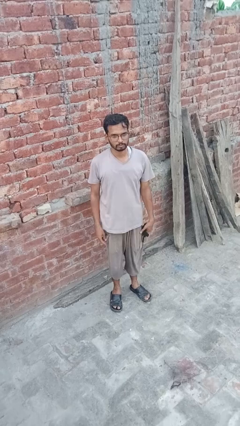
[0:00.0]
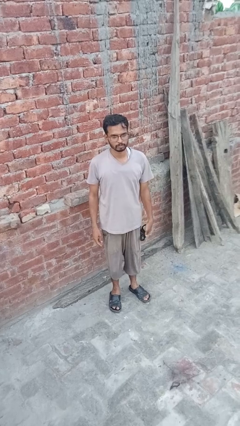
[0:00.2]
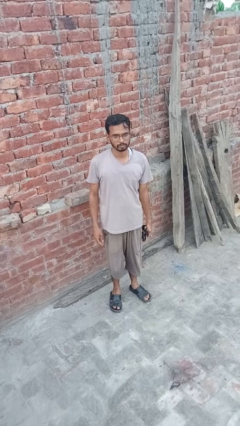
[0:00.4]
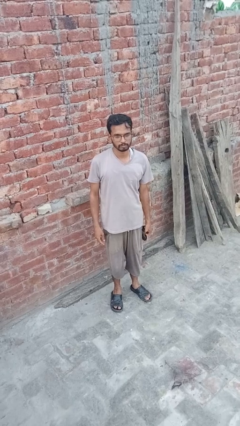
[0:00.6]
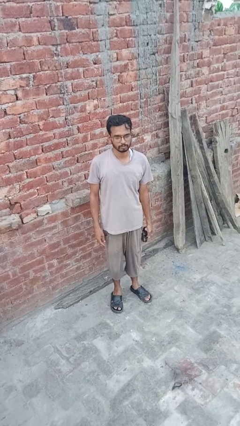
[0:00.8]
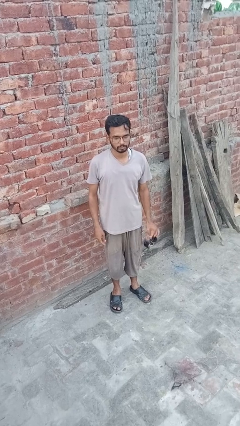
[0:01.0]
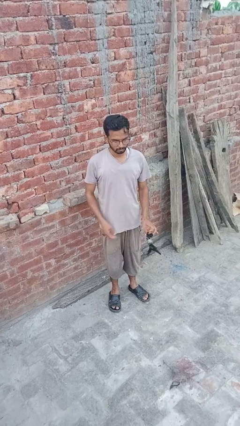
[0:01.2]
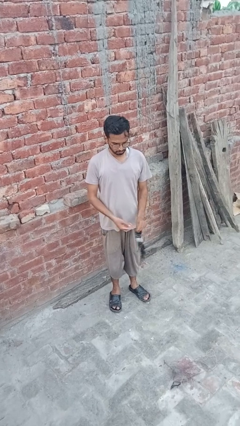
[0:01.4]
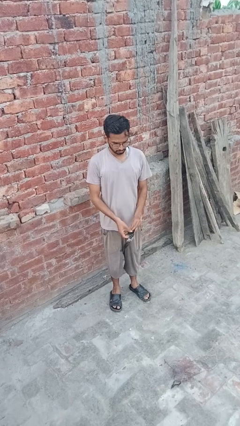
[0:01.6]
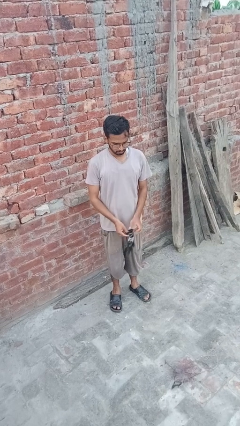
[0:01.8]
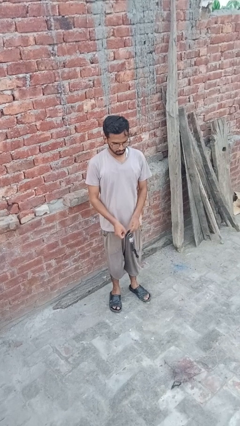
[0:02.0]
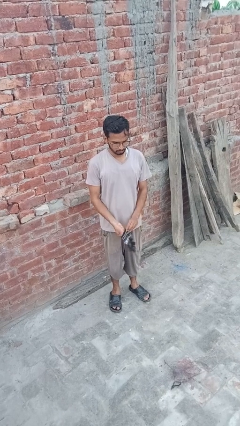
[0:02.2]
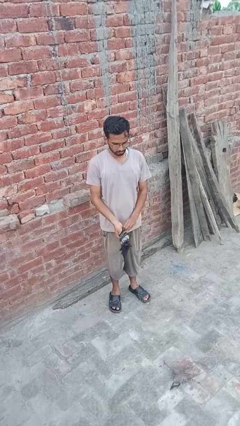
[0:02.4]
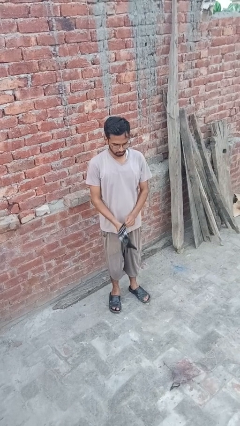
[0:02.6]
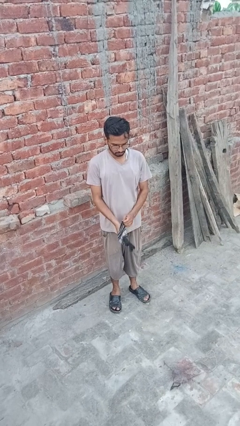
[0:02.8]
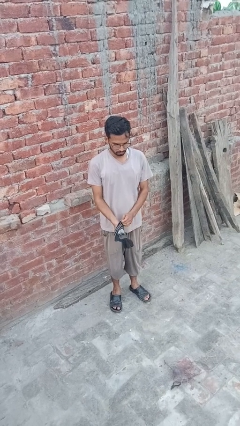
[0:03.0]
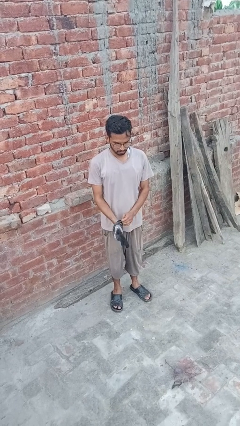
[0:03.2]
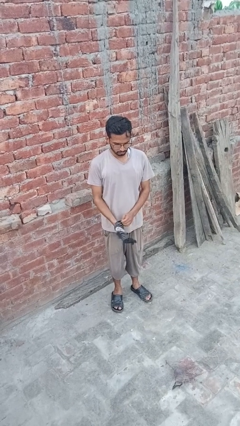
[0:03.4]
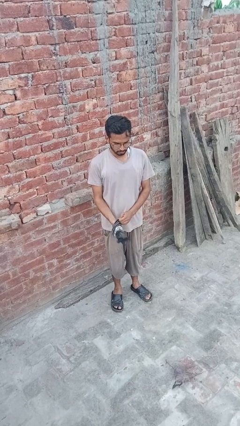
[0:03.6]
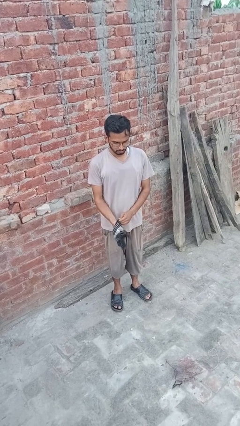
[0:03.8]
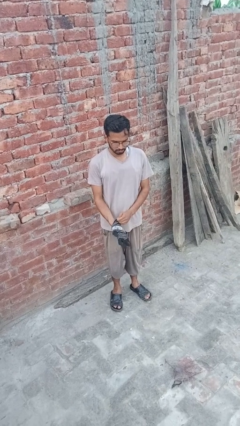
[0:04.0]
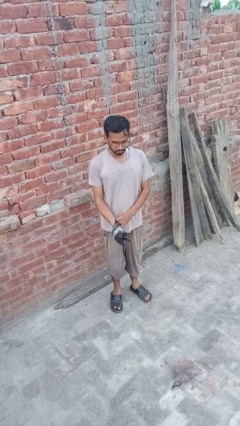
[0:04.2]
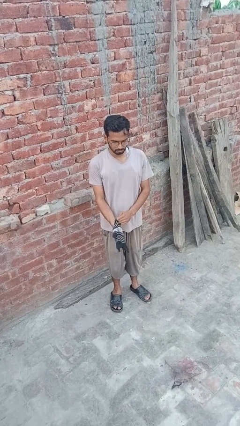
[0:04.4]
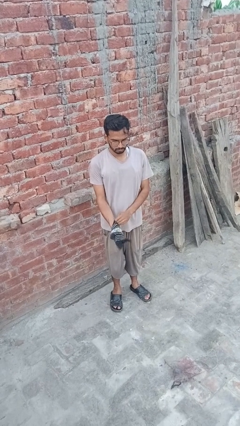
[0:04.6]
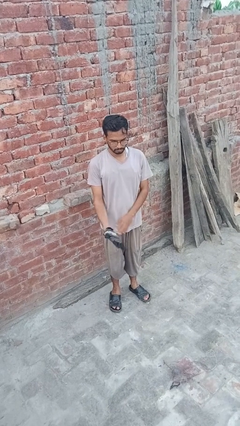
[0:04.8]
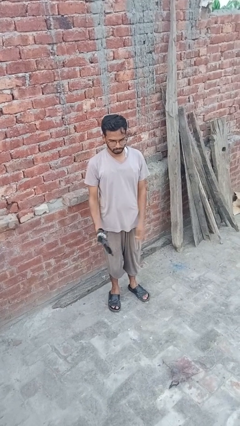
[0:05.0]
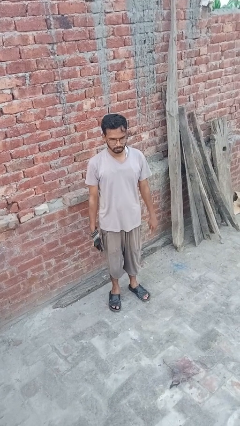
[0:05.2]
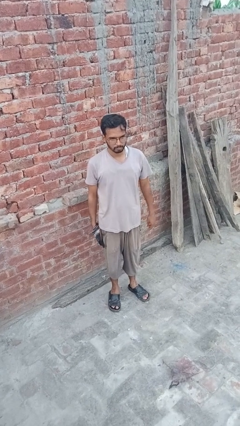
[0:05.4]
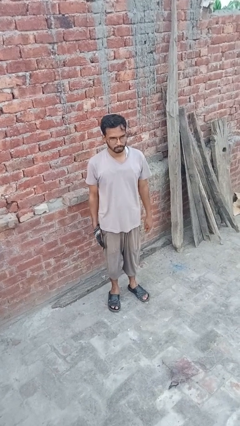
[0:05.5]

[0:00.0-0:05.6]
person puts on gloves

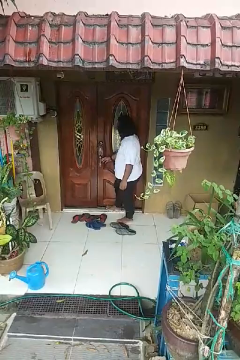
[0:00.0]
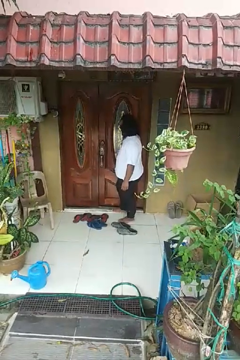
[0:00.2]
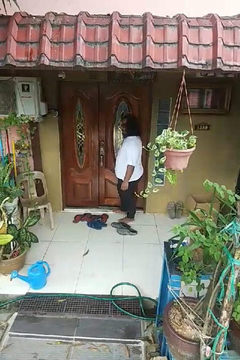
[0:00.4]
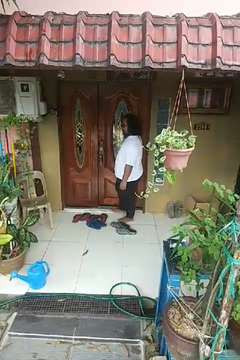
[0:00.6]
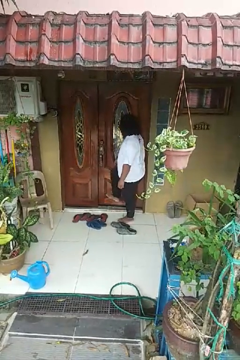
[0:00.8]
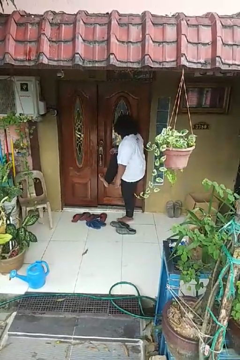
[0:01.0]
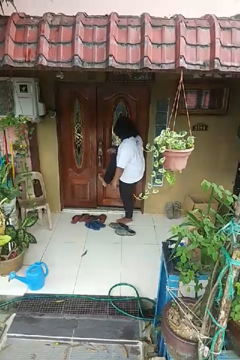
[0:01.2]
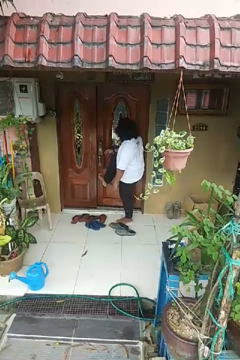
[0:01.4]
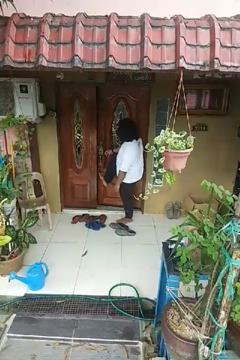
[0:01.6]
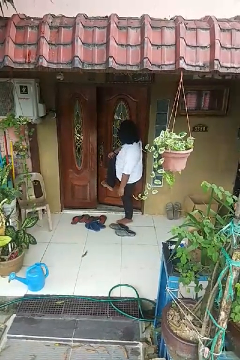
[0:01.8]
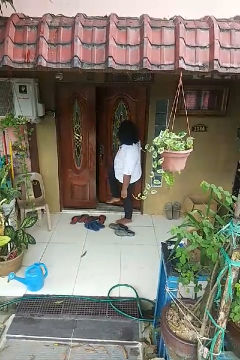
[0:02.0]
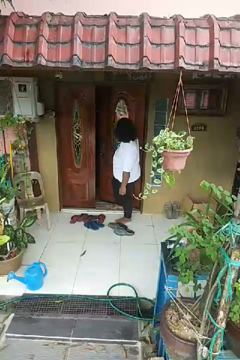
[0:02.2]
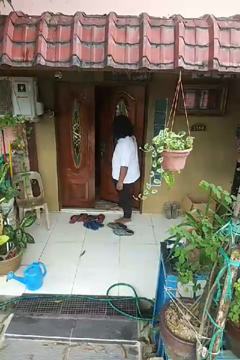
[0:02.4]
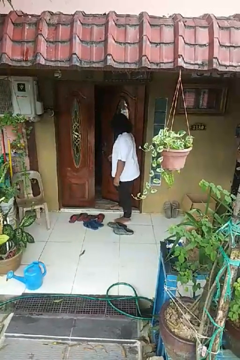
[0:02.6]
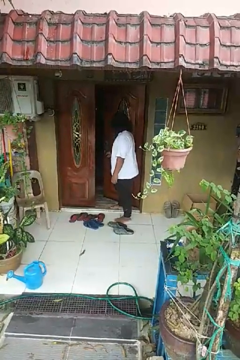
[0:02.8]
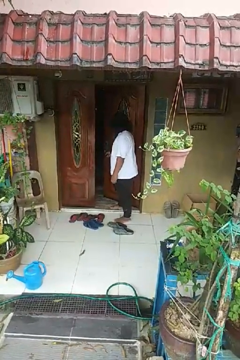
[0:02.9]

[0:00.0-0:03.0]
person opens facility door

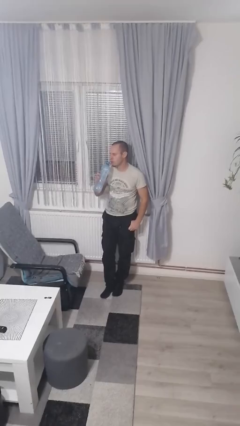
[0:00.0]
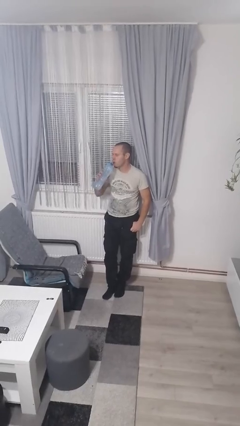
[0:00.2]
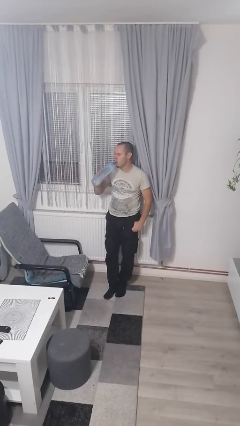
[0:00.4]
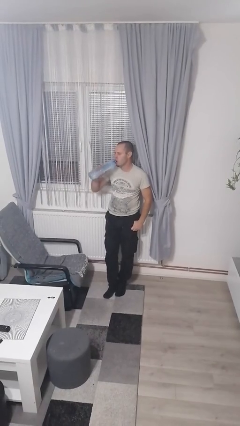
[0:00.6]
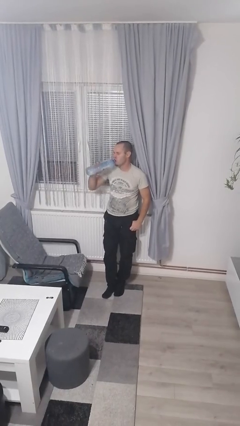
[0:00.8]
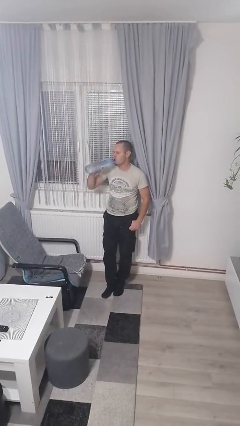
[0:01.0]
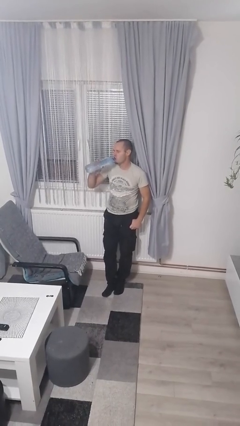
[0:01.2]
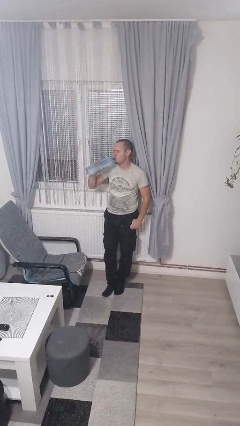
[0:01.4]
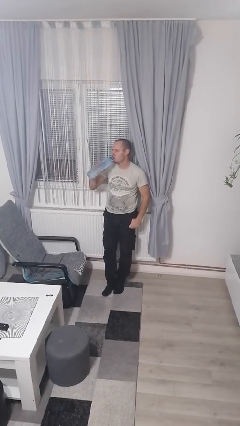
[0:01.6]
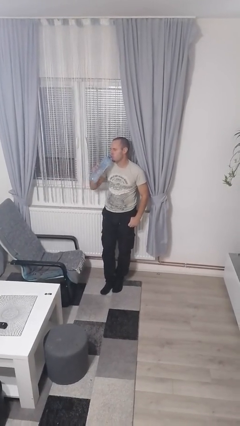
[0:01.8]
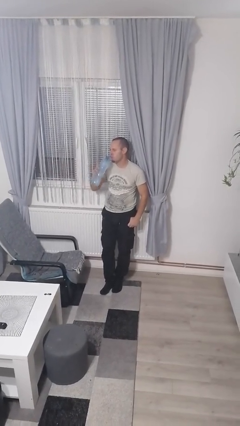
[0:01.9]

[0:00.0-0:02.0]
person drinks from bottle

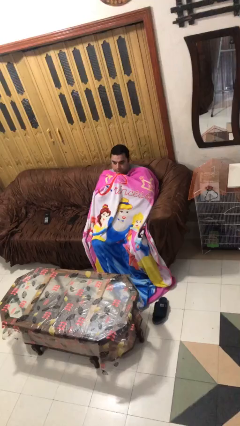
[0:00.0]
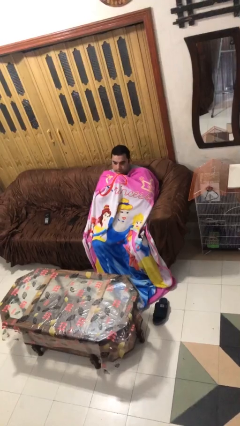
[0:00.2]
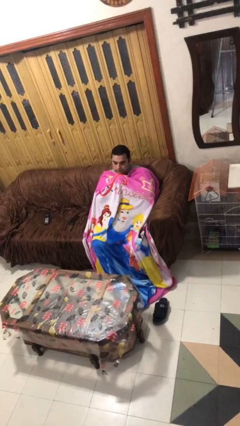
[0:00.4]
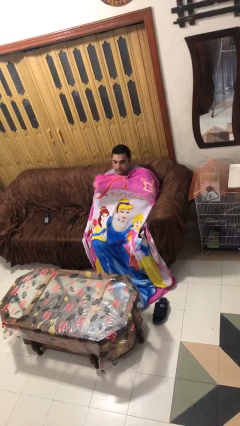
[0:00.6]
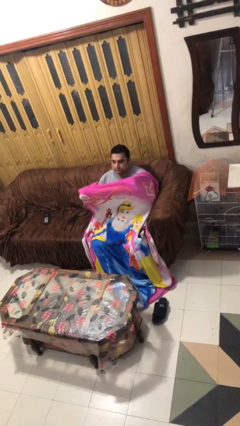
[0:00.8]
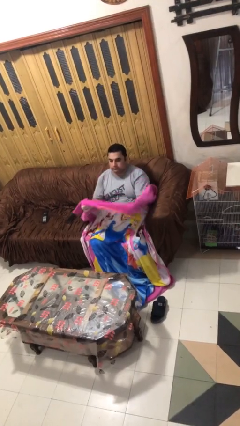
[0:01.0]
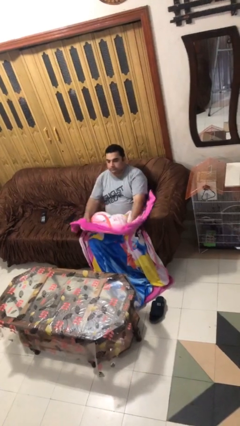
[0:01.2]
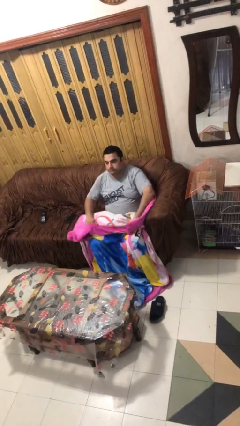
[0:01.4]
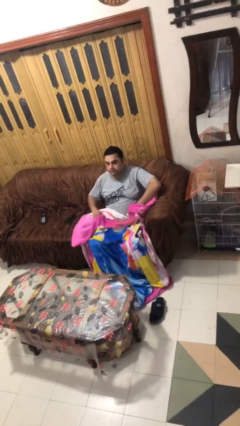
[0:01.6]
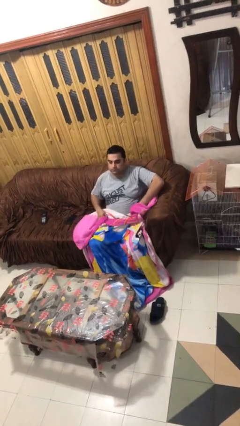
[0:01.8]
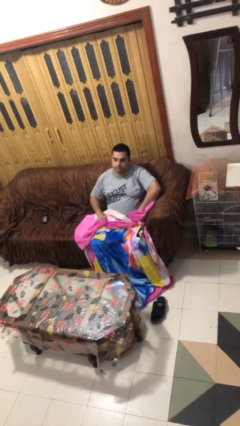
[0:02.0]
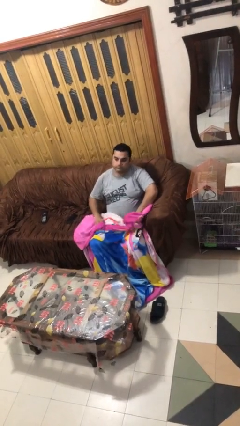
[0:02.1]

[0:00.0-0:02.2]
person uncovers with blanket

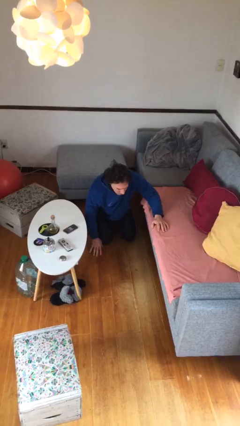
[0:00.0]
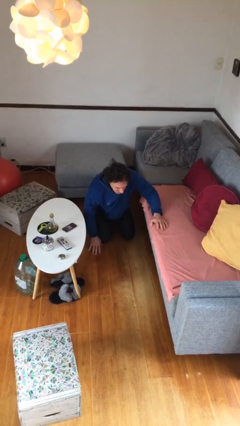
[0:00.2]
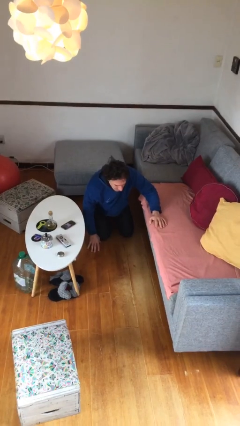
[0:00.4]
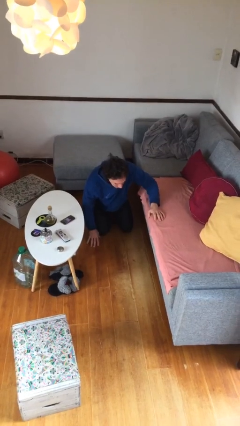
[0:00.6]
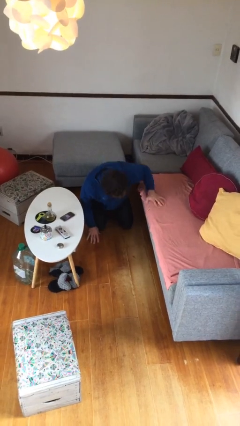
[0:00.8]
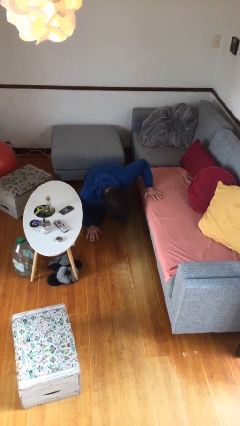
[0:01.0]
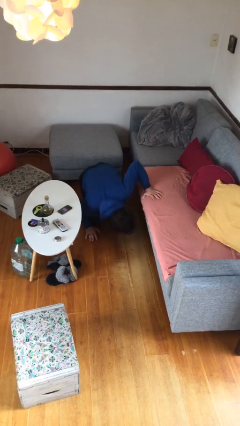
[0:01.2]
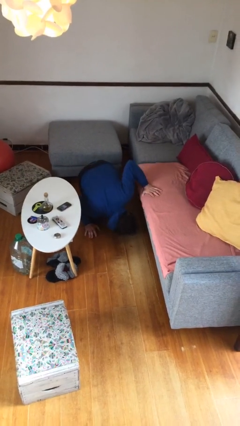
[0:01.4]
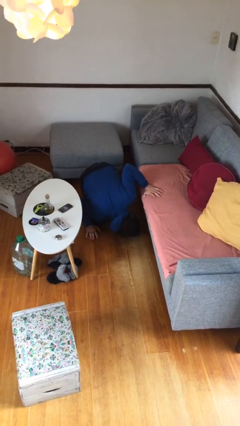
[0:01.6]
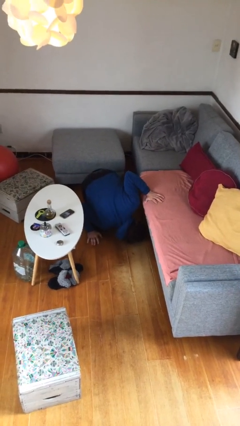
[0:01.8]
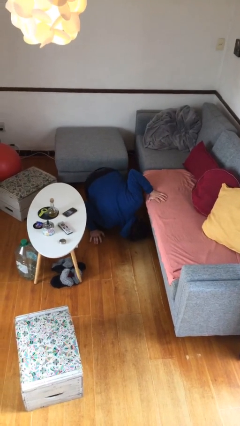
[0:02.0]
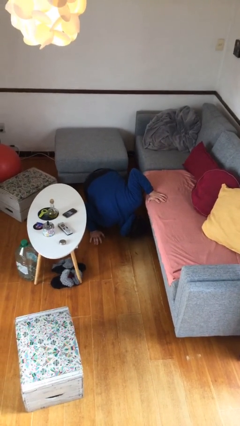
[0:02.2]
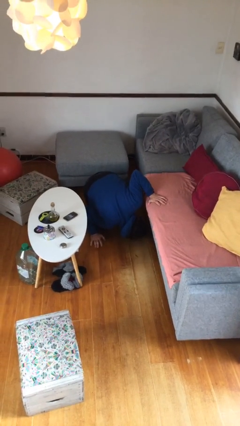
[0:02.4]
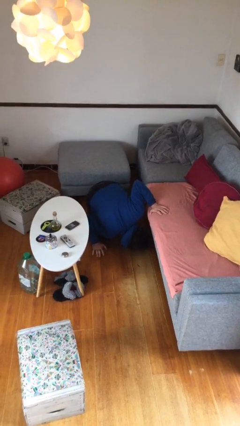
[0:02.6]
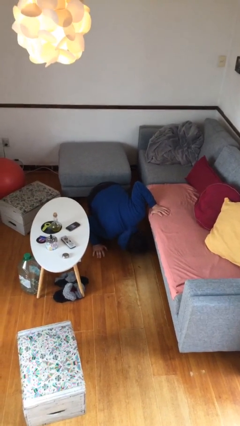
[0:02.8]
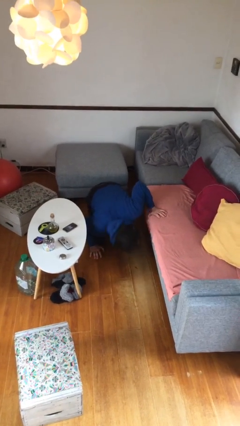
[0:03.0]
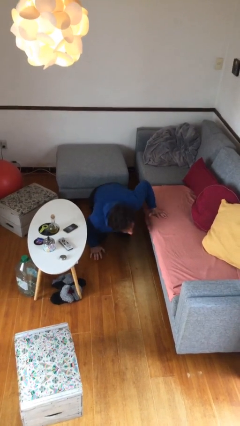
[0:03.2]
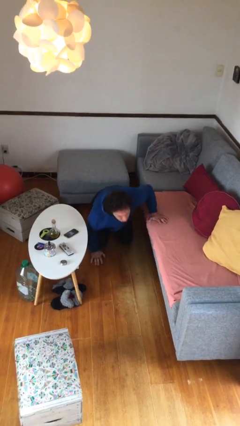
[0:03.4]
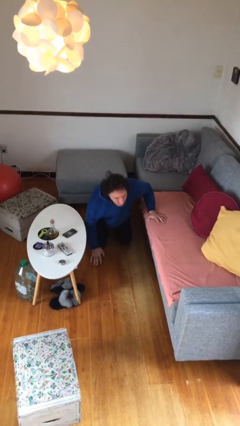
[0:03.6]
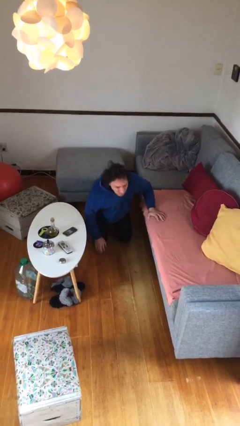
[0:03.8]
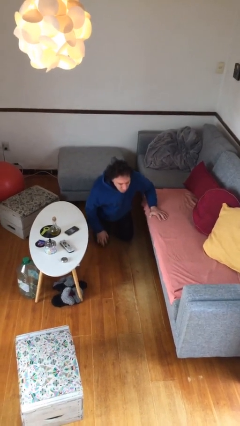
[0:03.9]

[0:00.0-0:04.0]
person searches under couch

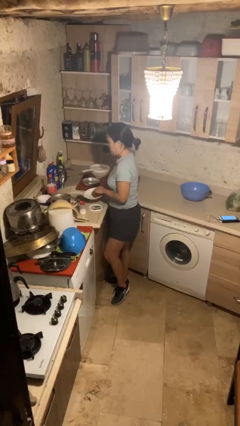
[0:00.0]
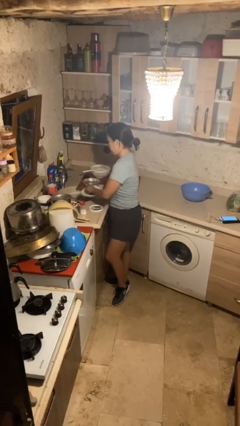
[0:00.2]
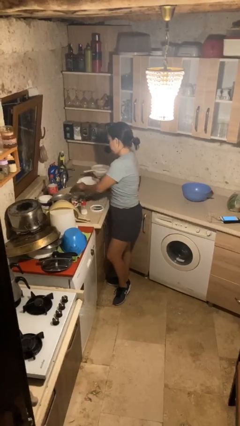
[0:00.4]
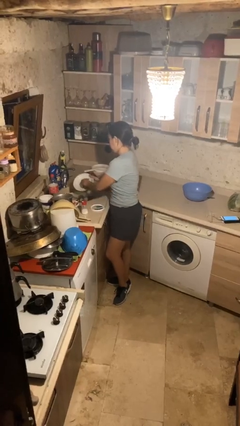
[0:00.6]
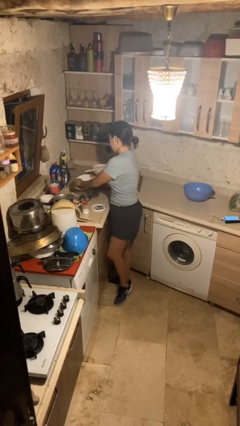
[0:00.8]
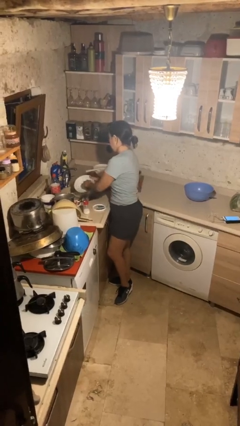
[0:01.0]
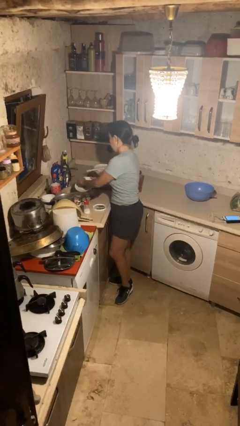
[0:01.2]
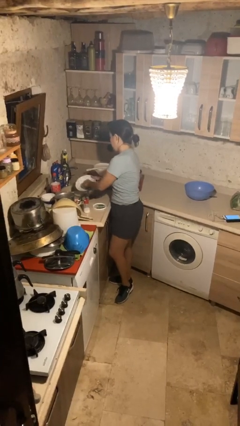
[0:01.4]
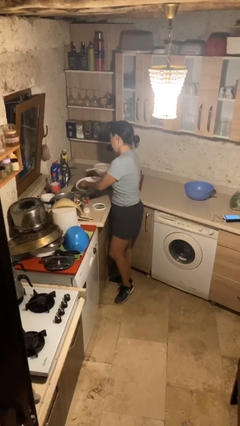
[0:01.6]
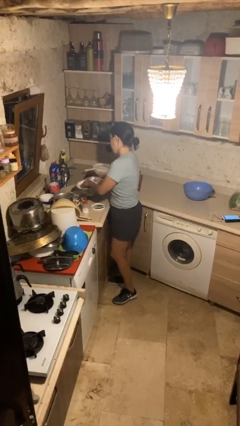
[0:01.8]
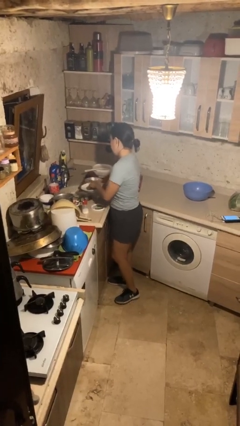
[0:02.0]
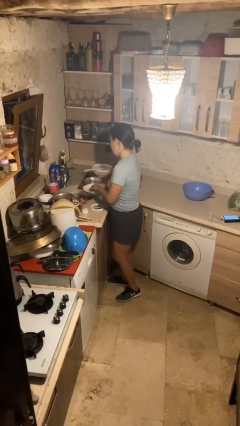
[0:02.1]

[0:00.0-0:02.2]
person washes dish
